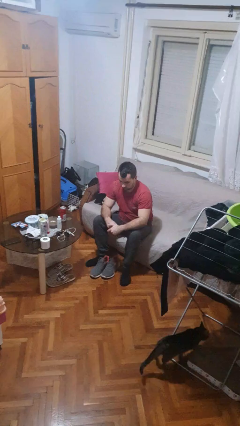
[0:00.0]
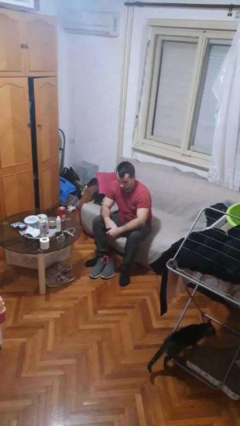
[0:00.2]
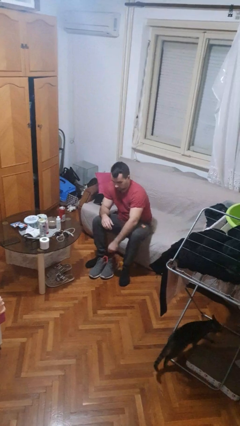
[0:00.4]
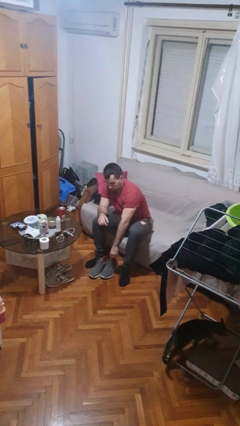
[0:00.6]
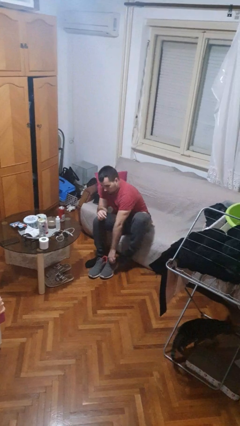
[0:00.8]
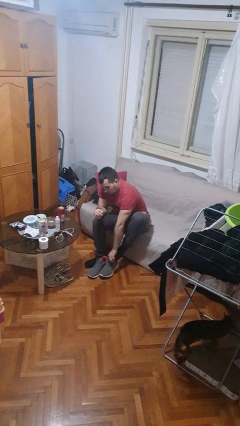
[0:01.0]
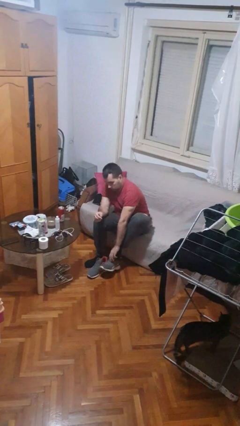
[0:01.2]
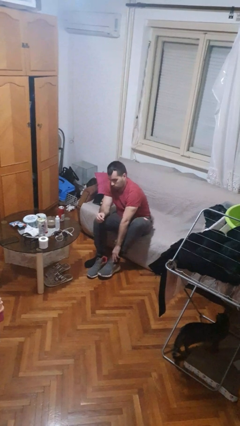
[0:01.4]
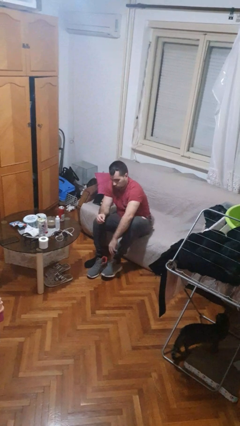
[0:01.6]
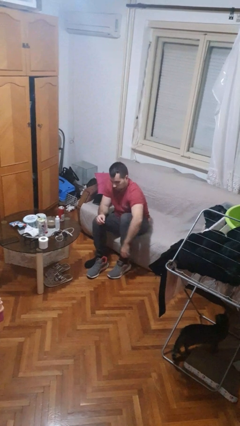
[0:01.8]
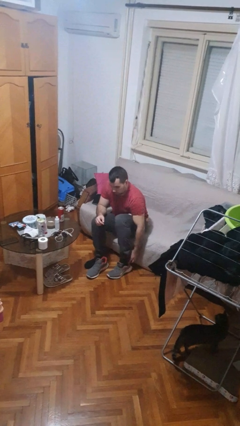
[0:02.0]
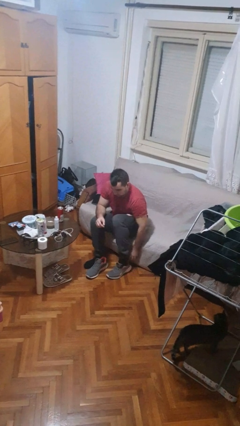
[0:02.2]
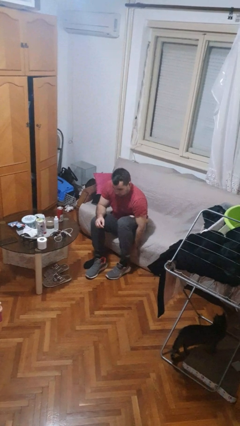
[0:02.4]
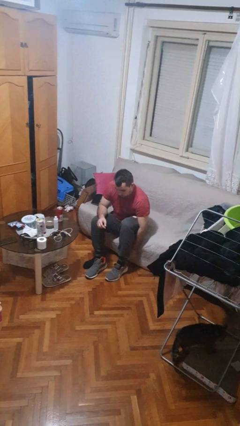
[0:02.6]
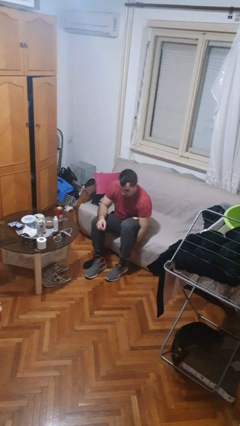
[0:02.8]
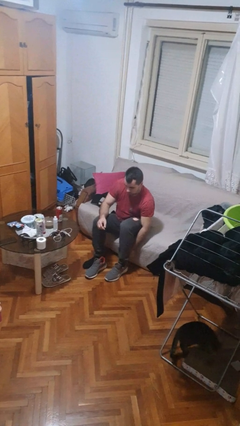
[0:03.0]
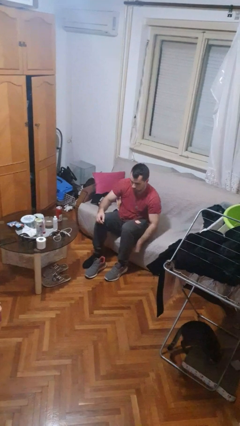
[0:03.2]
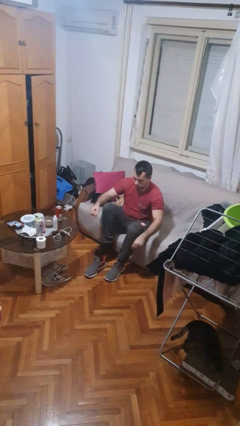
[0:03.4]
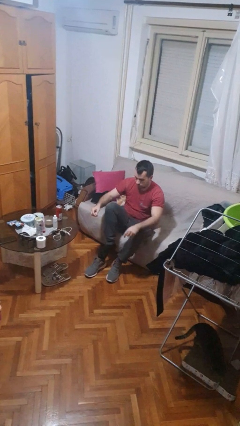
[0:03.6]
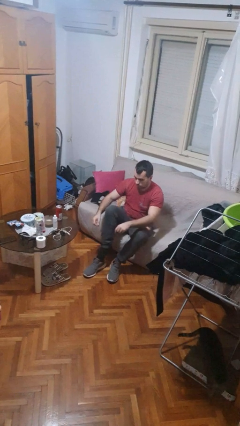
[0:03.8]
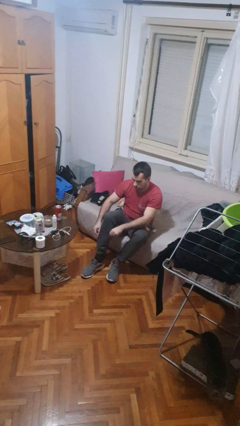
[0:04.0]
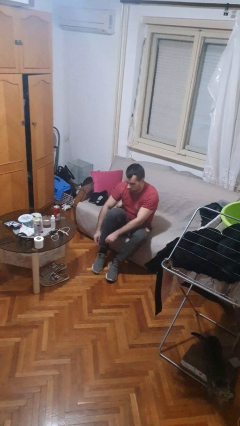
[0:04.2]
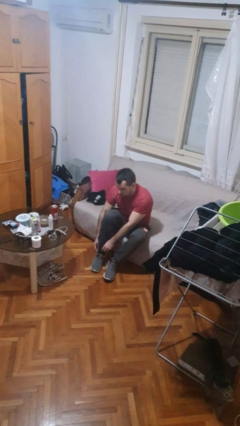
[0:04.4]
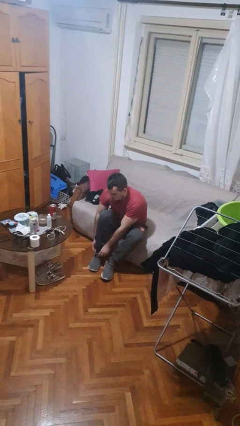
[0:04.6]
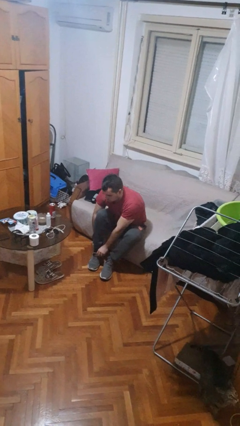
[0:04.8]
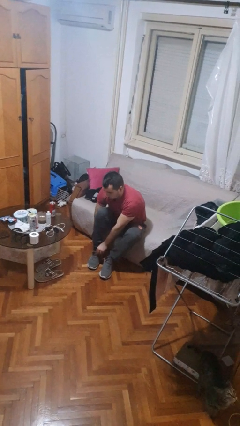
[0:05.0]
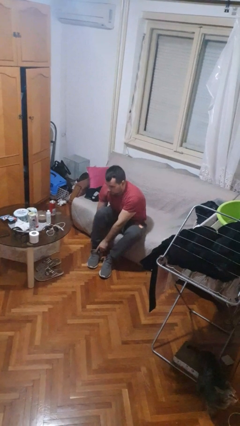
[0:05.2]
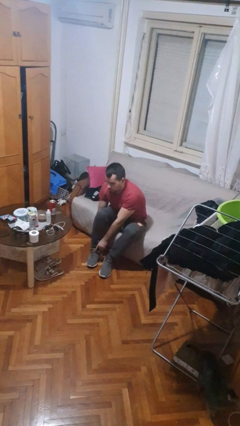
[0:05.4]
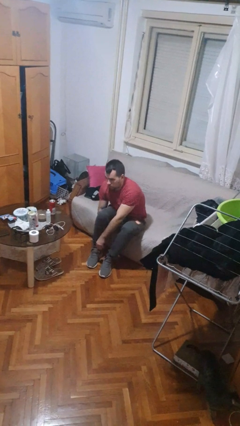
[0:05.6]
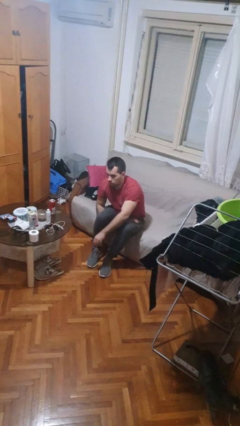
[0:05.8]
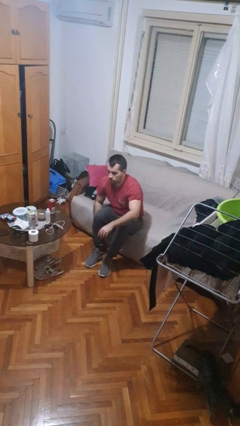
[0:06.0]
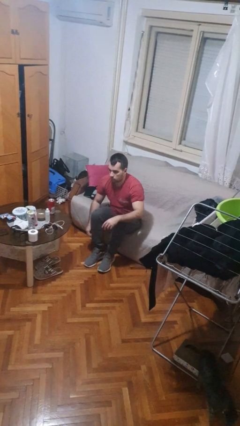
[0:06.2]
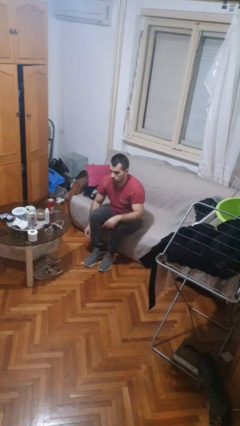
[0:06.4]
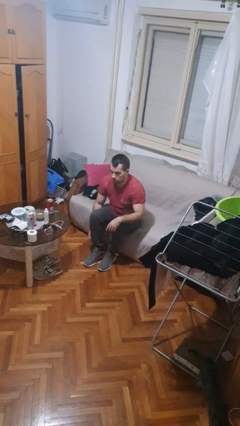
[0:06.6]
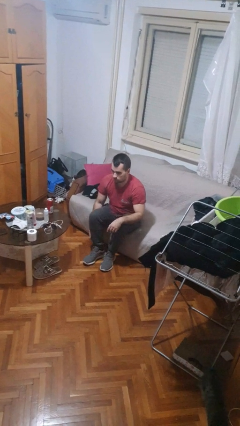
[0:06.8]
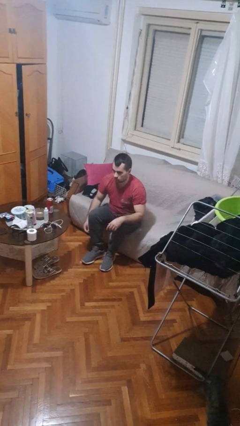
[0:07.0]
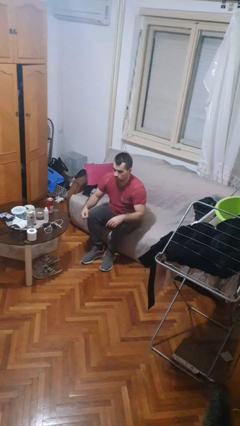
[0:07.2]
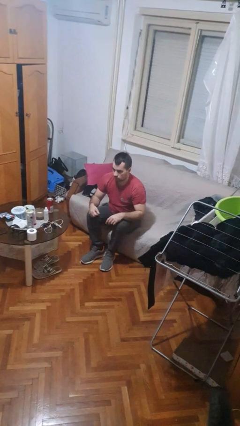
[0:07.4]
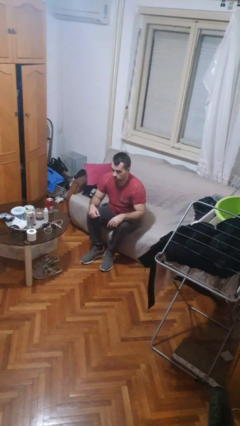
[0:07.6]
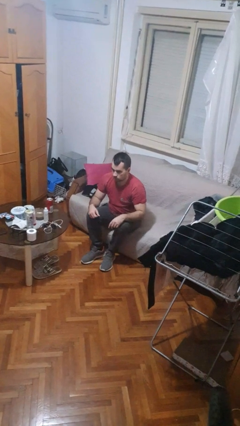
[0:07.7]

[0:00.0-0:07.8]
person puts on shoes

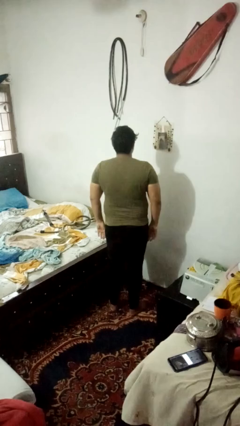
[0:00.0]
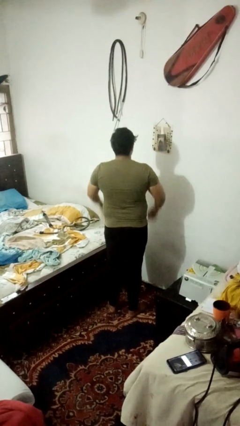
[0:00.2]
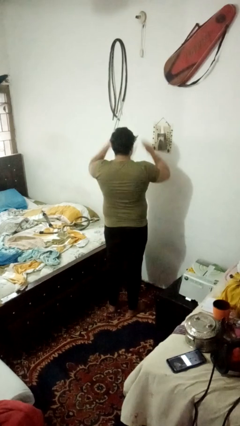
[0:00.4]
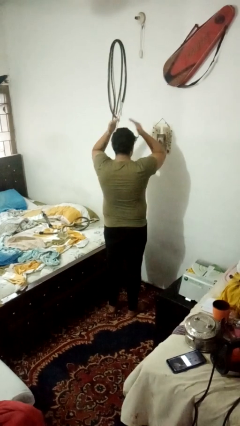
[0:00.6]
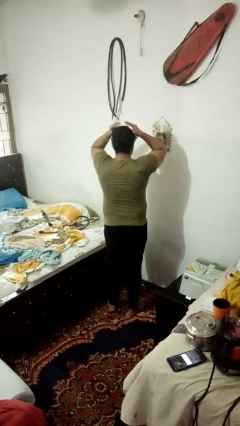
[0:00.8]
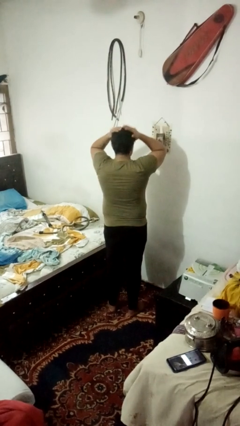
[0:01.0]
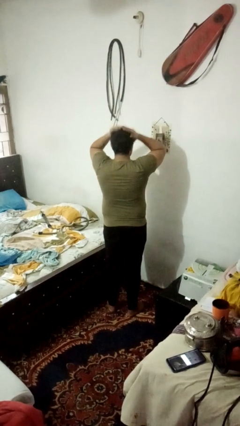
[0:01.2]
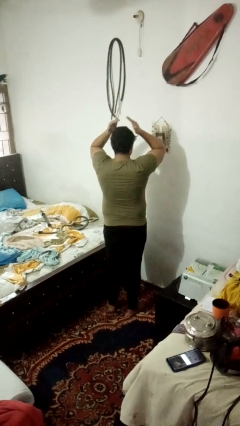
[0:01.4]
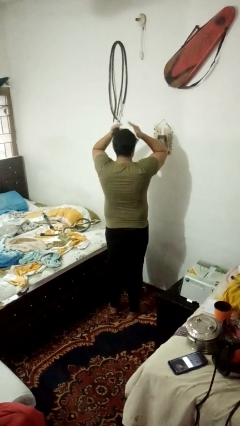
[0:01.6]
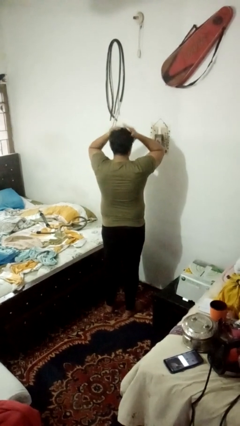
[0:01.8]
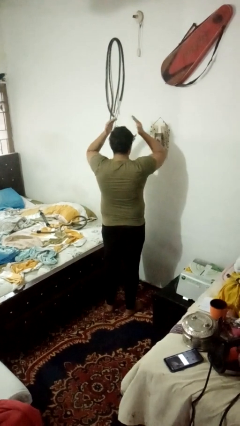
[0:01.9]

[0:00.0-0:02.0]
person pats head

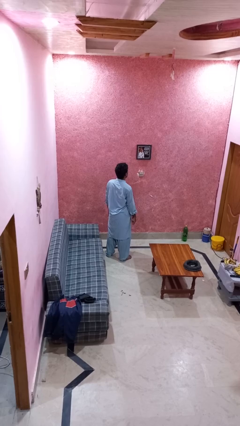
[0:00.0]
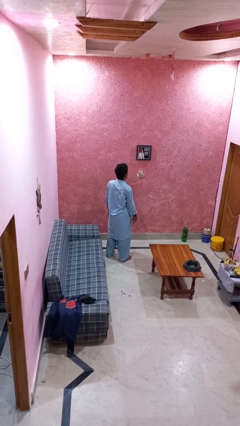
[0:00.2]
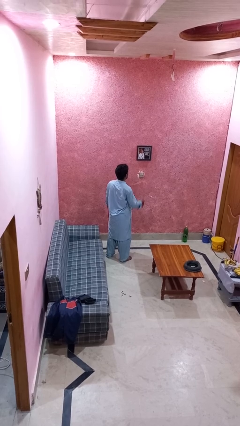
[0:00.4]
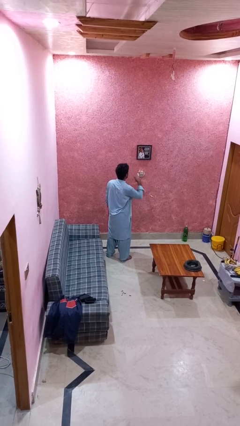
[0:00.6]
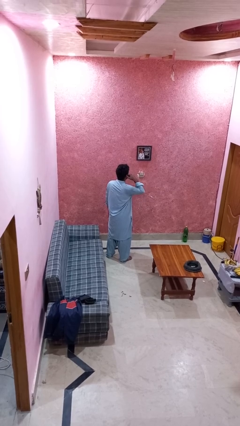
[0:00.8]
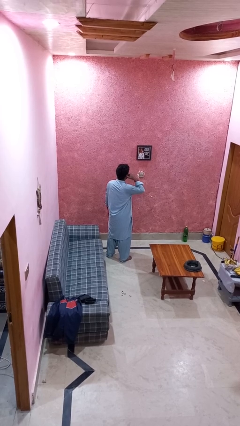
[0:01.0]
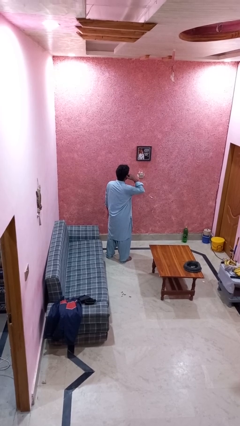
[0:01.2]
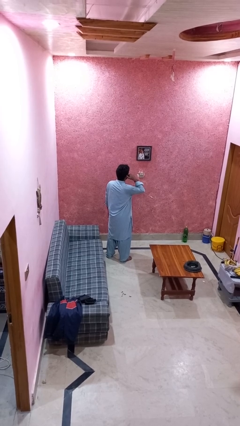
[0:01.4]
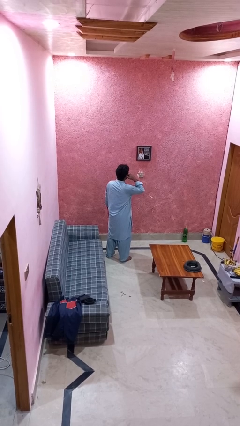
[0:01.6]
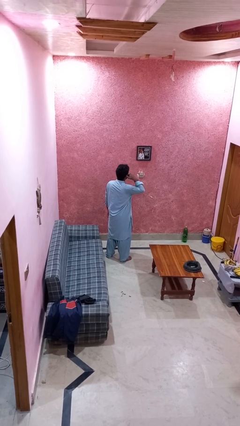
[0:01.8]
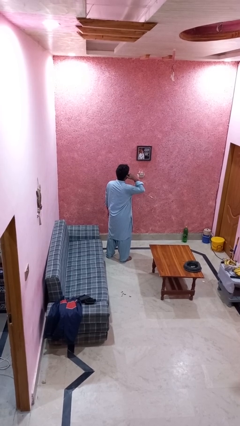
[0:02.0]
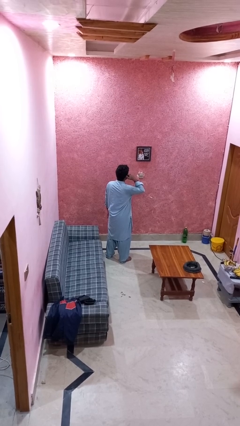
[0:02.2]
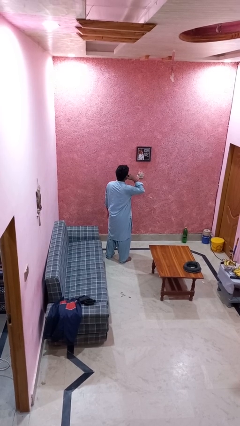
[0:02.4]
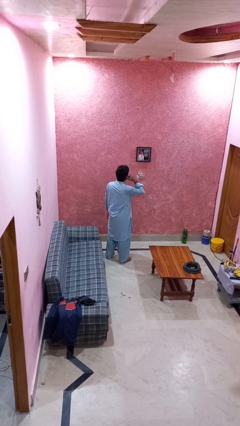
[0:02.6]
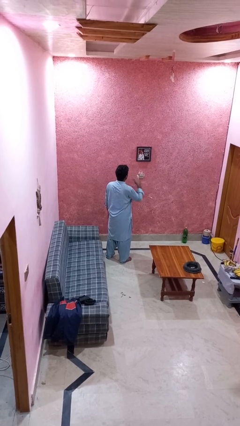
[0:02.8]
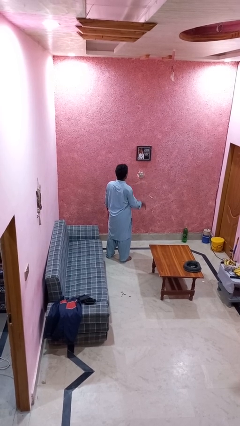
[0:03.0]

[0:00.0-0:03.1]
person gestures call me

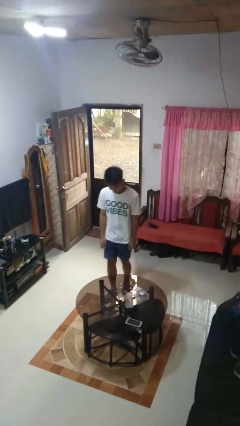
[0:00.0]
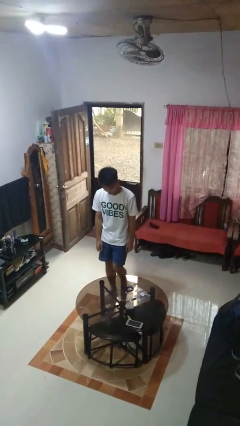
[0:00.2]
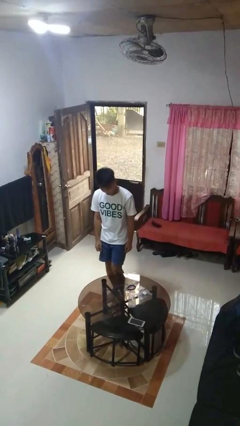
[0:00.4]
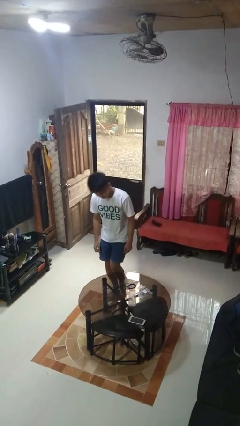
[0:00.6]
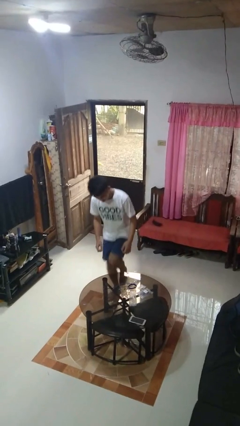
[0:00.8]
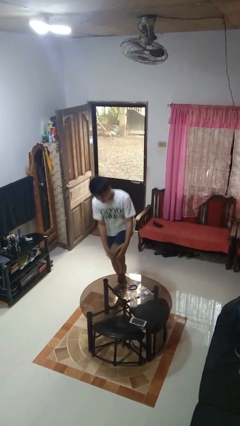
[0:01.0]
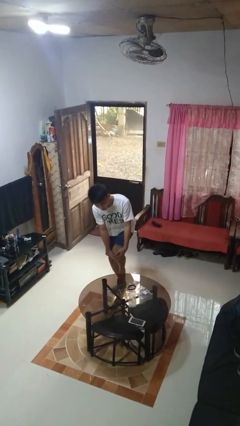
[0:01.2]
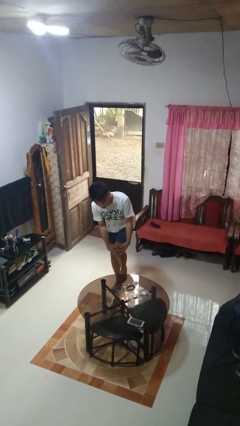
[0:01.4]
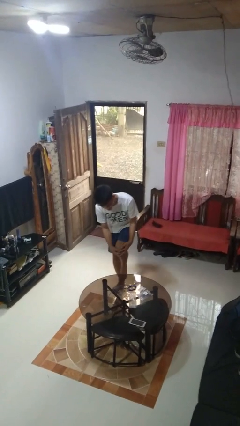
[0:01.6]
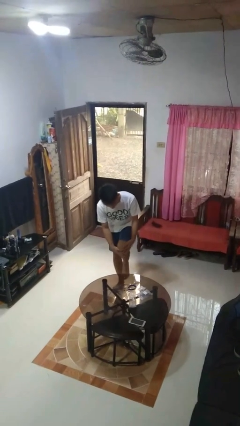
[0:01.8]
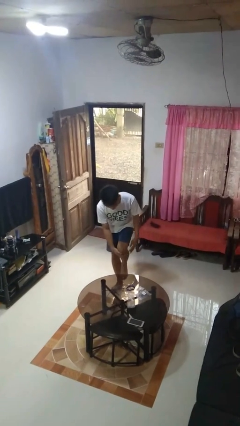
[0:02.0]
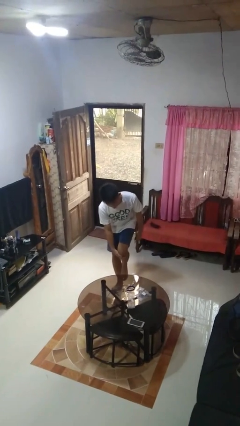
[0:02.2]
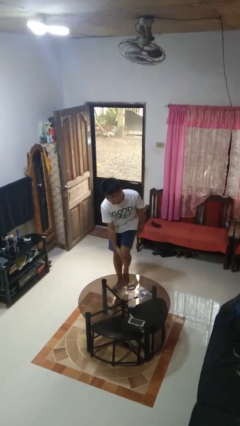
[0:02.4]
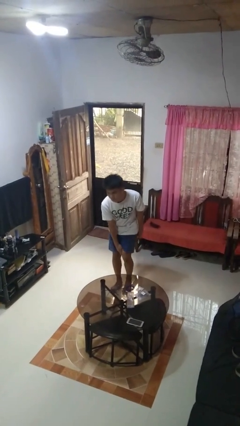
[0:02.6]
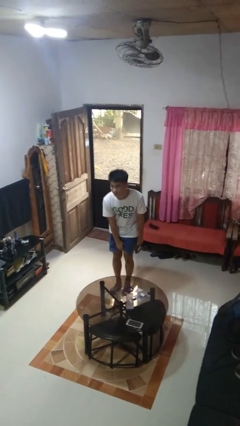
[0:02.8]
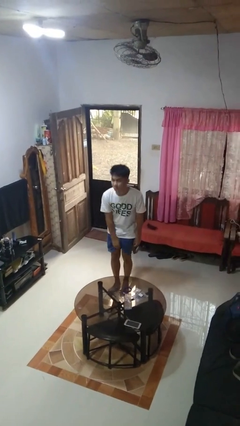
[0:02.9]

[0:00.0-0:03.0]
person bumps into table

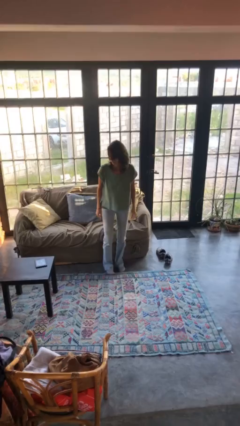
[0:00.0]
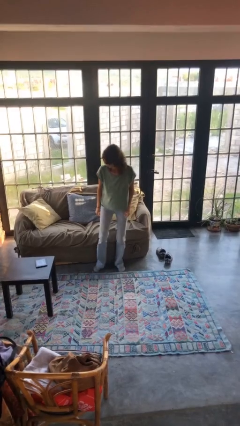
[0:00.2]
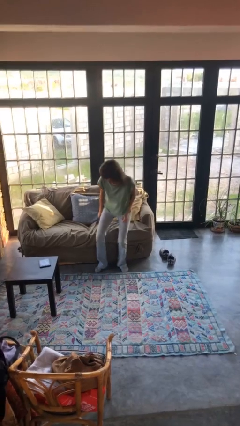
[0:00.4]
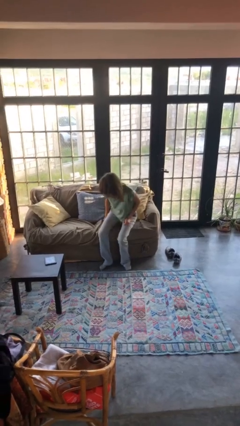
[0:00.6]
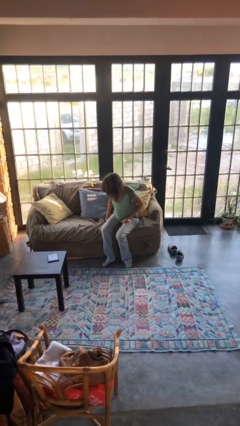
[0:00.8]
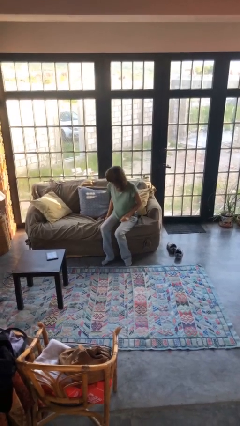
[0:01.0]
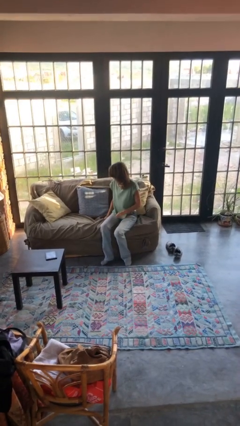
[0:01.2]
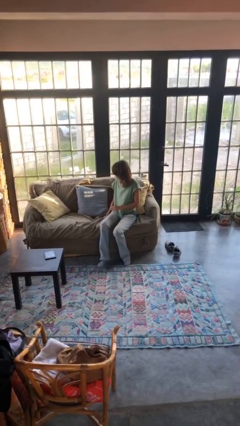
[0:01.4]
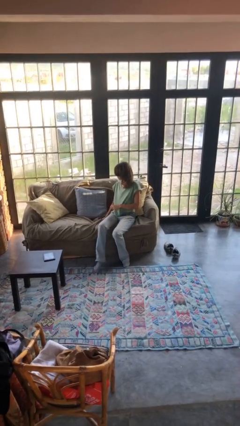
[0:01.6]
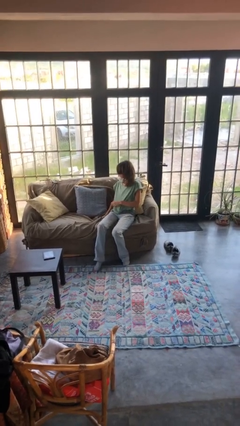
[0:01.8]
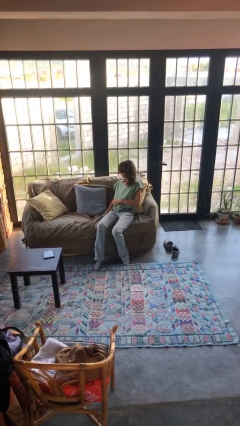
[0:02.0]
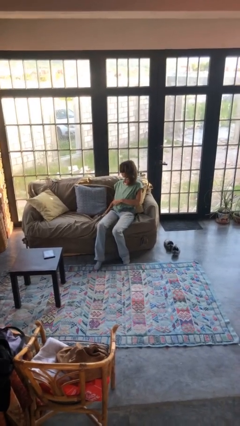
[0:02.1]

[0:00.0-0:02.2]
person lies down on couch
